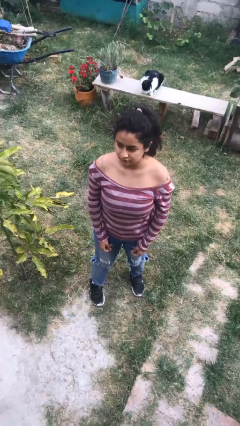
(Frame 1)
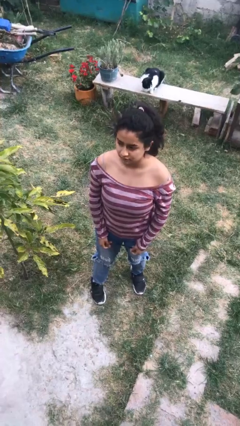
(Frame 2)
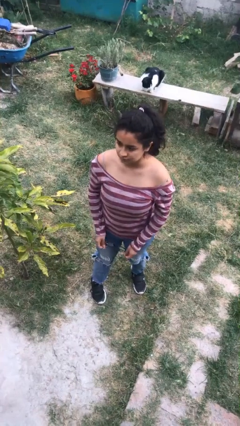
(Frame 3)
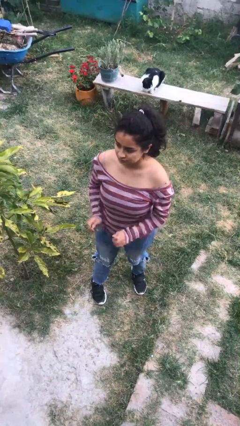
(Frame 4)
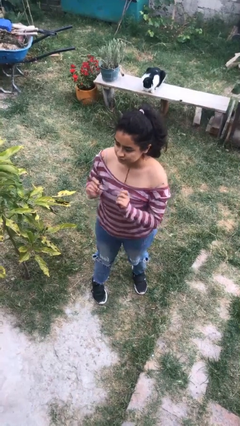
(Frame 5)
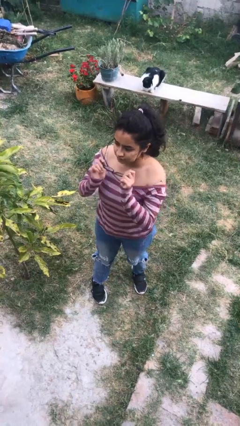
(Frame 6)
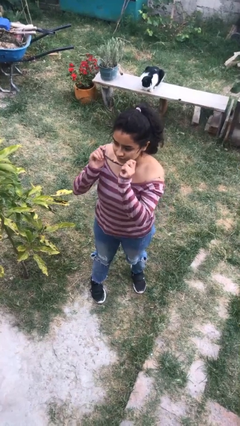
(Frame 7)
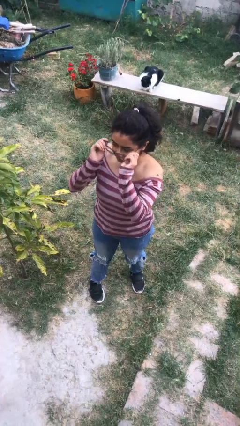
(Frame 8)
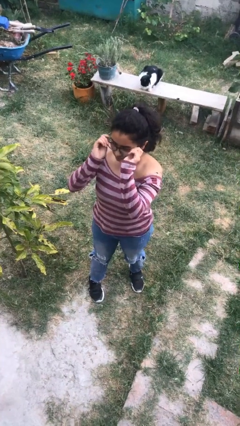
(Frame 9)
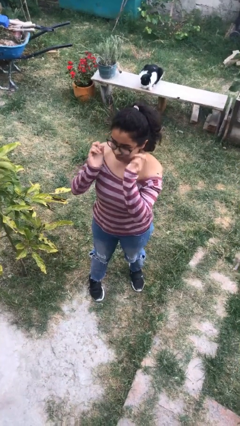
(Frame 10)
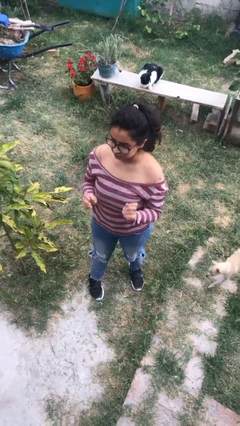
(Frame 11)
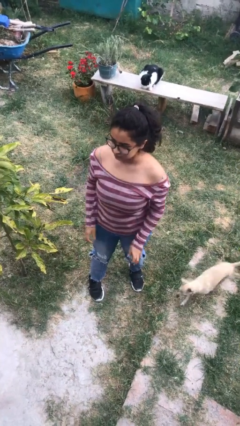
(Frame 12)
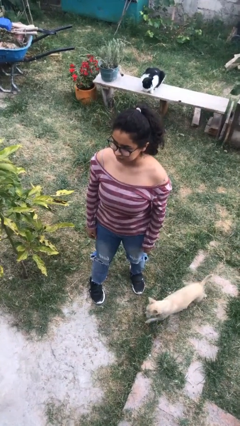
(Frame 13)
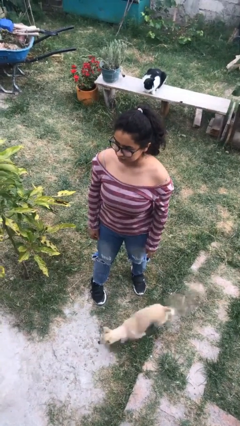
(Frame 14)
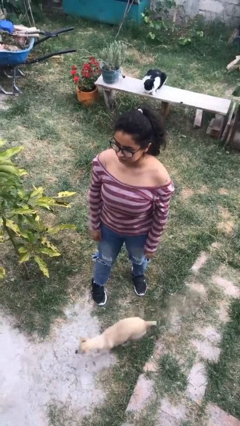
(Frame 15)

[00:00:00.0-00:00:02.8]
person puts on glasses

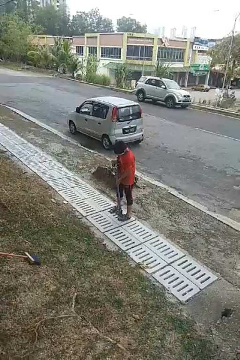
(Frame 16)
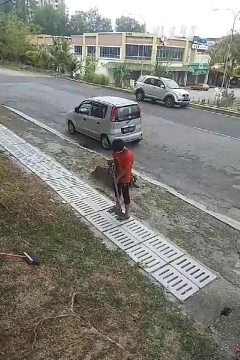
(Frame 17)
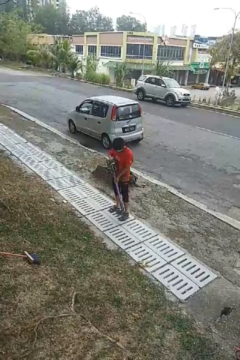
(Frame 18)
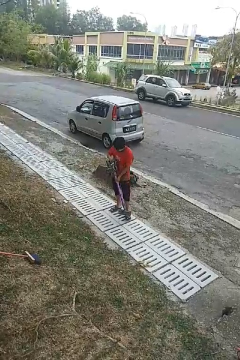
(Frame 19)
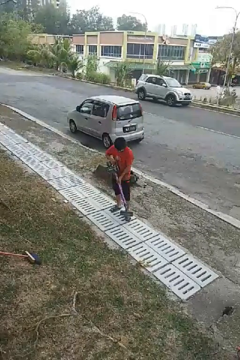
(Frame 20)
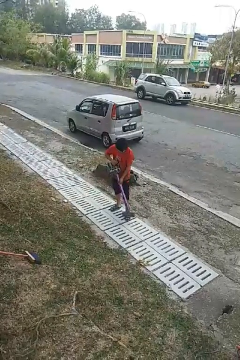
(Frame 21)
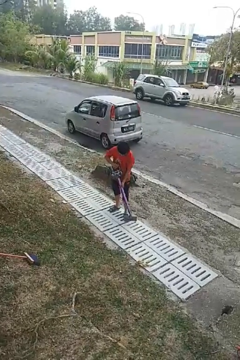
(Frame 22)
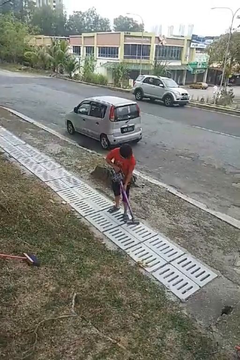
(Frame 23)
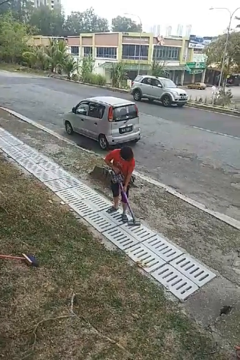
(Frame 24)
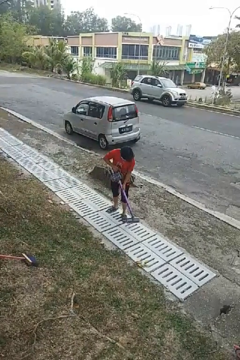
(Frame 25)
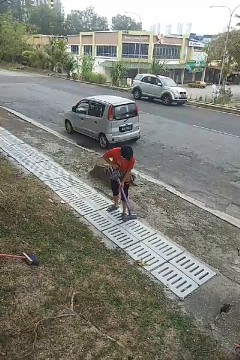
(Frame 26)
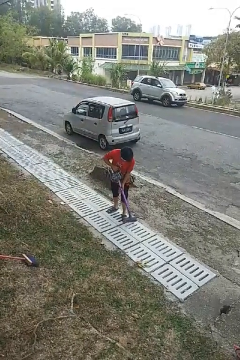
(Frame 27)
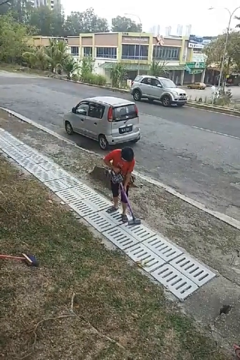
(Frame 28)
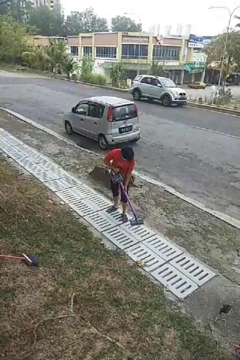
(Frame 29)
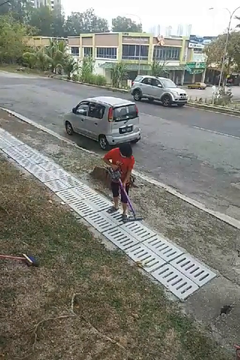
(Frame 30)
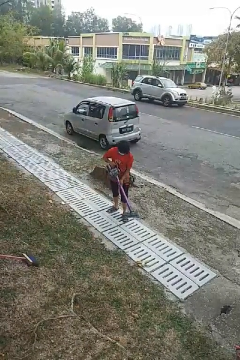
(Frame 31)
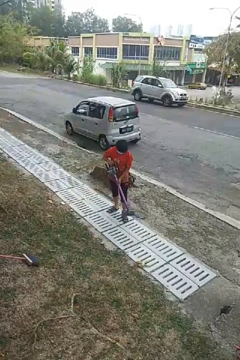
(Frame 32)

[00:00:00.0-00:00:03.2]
person vacuums carpet

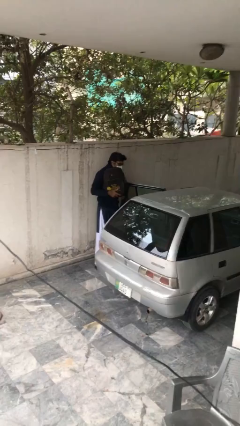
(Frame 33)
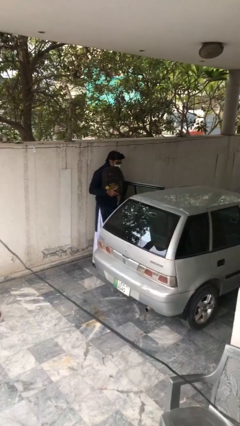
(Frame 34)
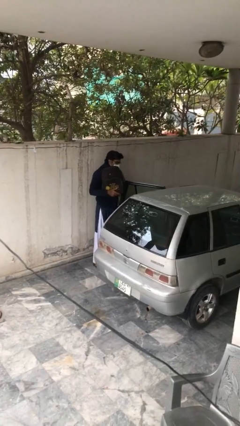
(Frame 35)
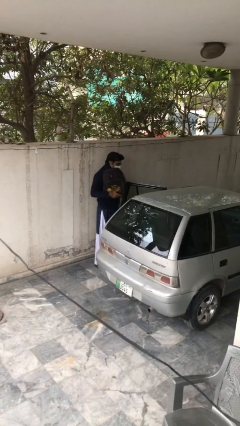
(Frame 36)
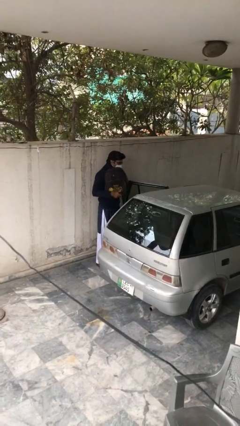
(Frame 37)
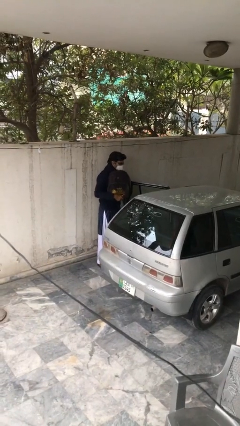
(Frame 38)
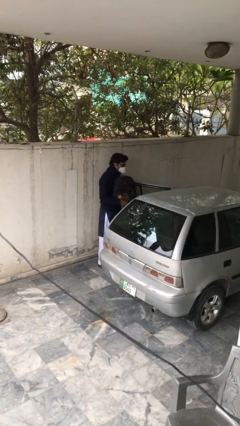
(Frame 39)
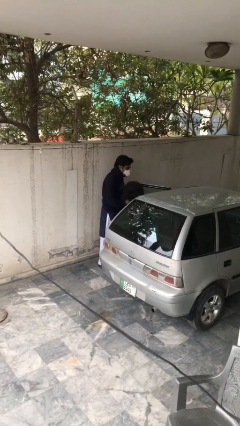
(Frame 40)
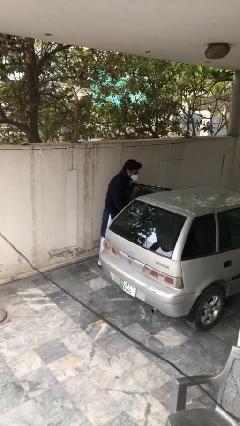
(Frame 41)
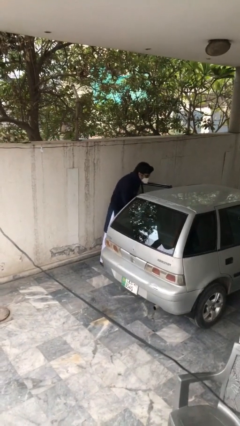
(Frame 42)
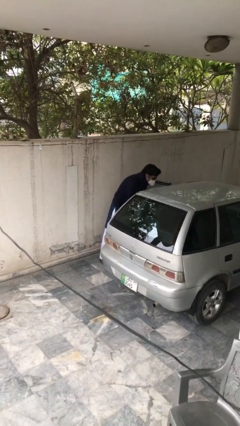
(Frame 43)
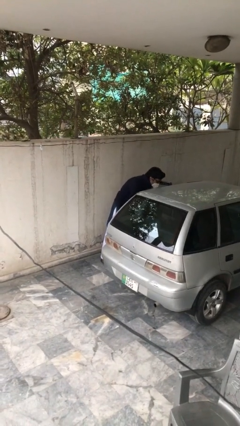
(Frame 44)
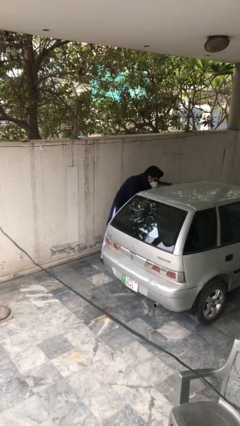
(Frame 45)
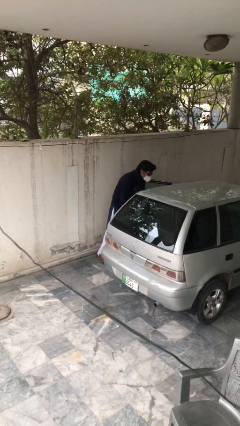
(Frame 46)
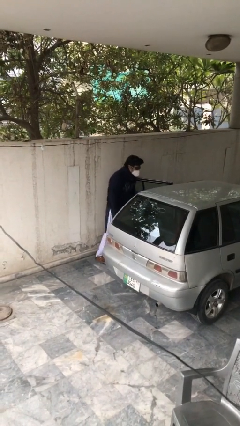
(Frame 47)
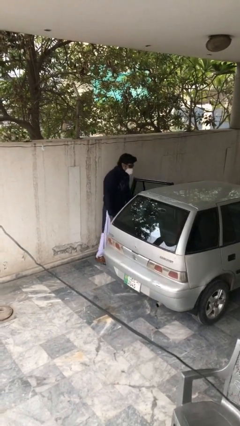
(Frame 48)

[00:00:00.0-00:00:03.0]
person loads car

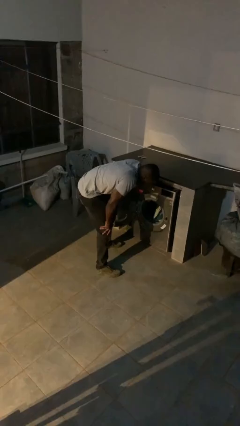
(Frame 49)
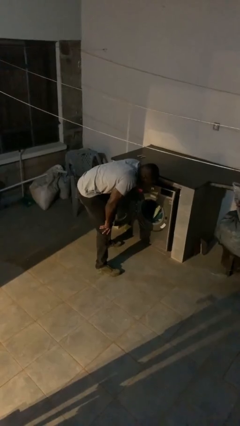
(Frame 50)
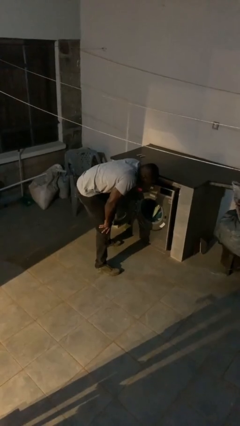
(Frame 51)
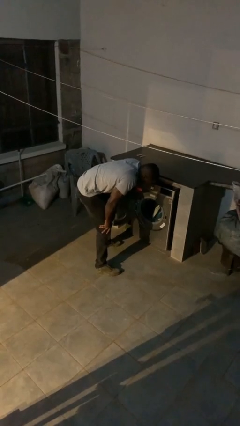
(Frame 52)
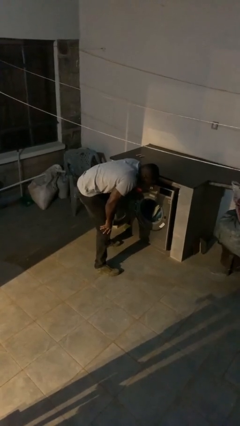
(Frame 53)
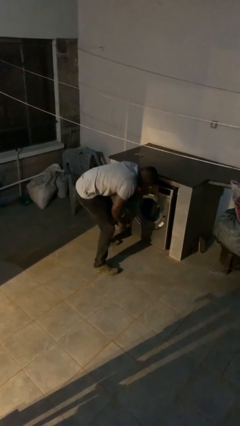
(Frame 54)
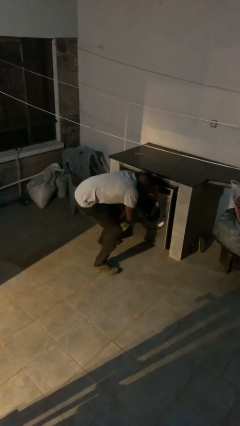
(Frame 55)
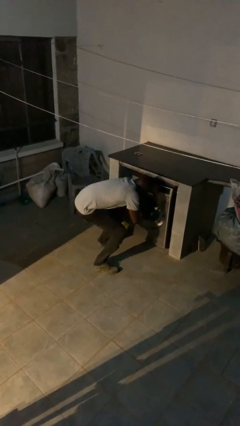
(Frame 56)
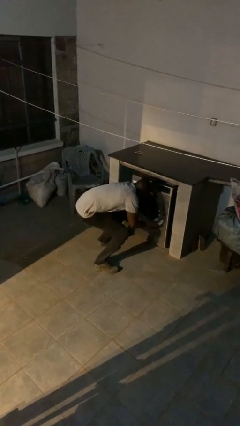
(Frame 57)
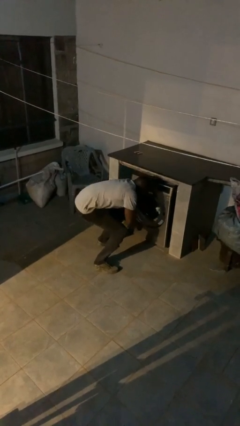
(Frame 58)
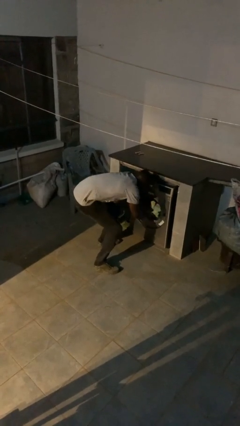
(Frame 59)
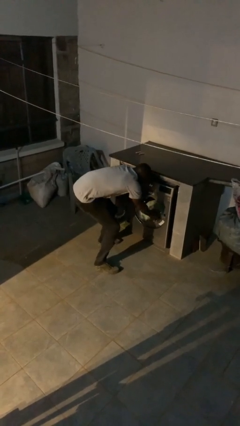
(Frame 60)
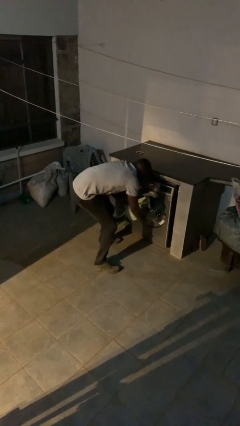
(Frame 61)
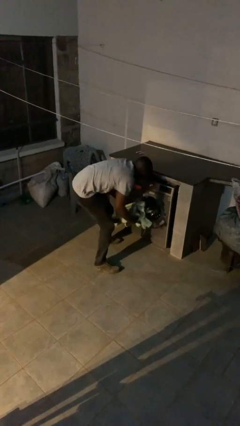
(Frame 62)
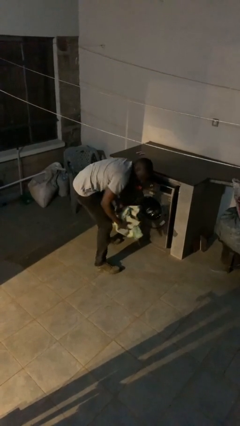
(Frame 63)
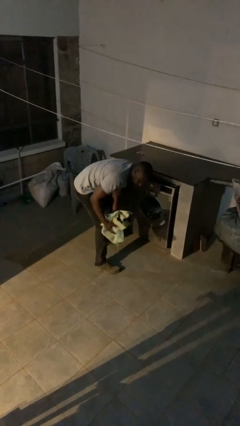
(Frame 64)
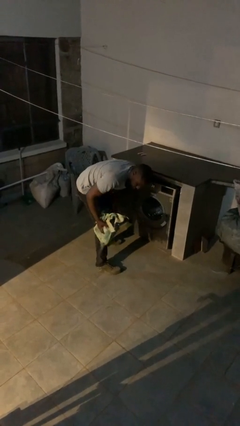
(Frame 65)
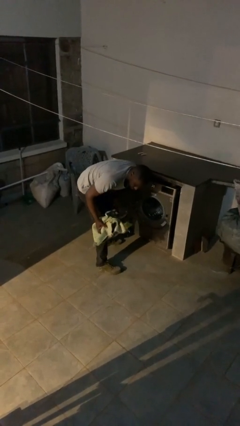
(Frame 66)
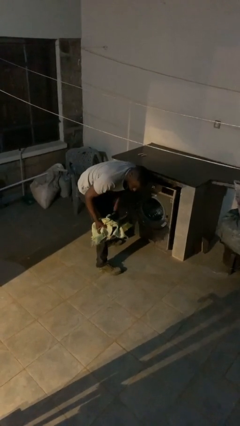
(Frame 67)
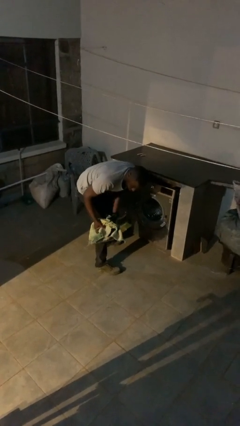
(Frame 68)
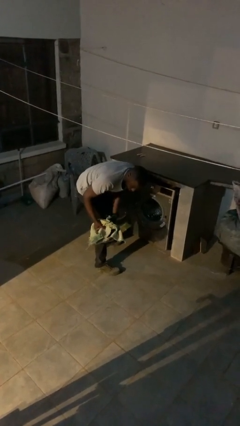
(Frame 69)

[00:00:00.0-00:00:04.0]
person unloads clotheswasher

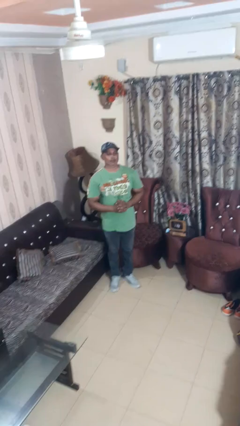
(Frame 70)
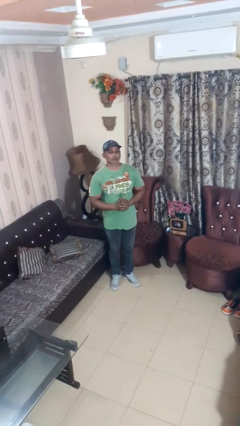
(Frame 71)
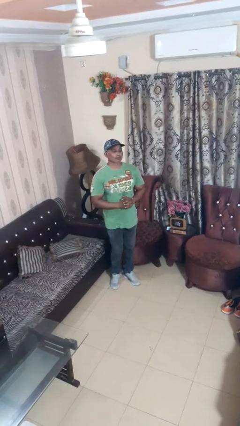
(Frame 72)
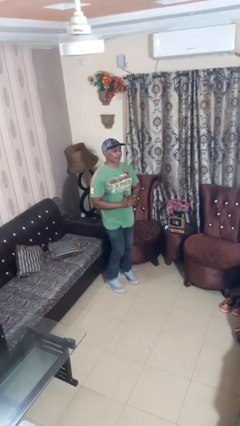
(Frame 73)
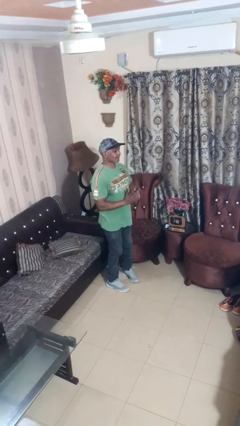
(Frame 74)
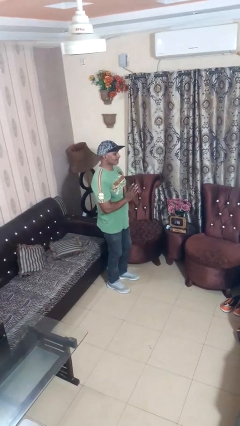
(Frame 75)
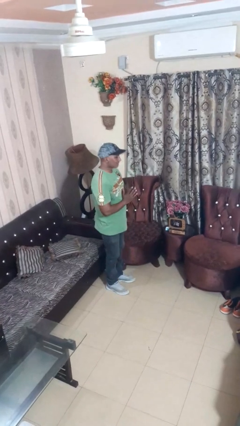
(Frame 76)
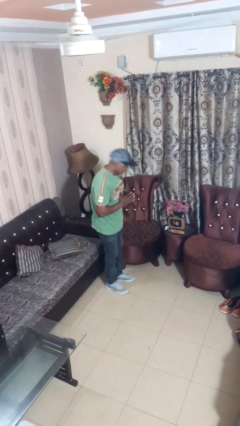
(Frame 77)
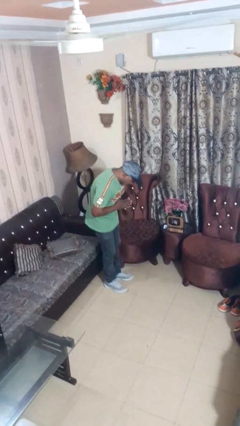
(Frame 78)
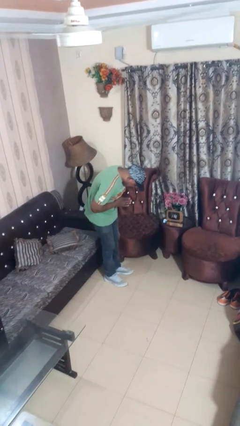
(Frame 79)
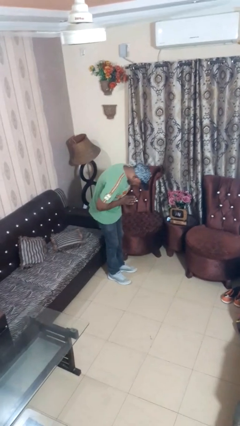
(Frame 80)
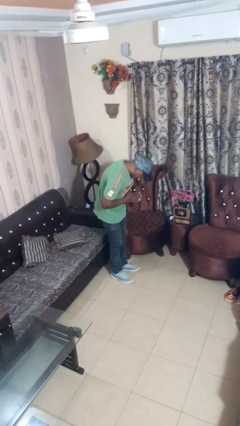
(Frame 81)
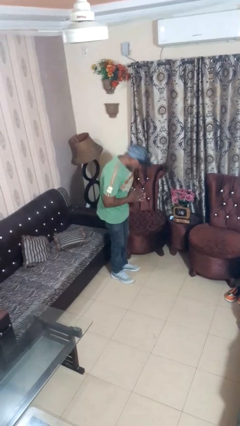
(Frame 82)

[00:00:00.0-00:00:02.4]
person bows

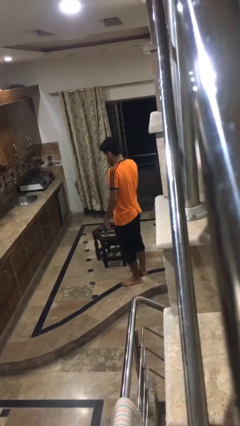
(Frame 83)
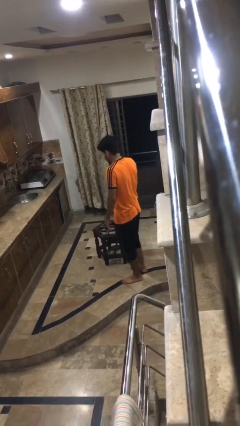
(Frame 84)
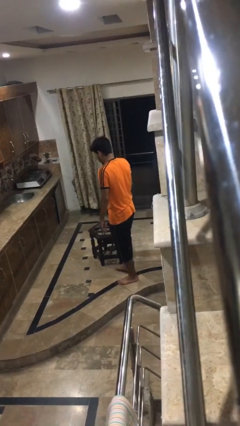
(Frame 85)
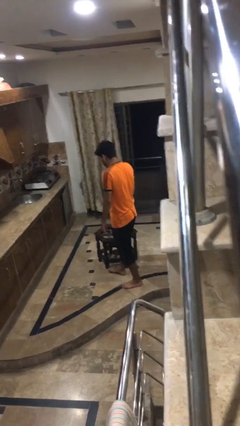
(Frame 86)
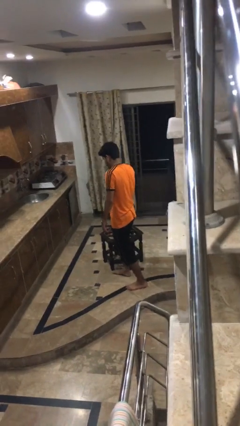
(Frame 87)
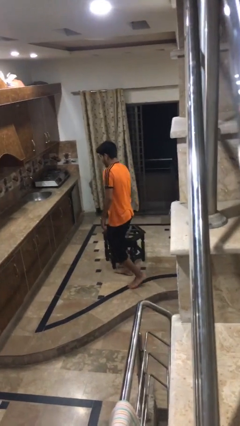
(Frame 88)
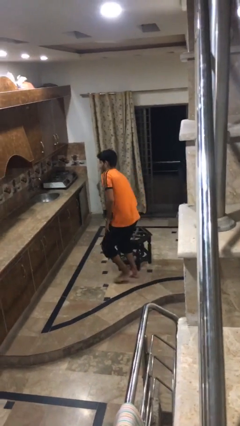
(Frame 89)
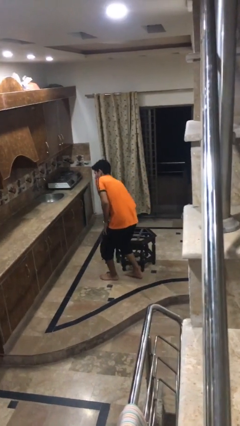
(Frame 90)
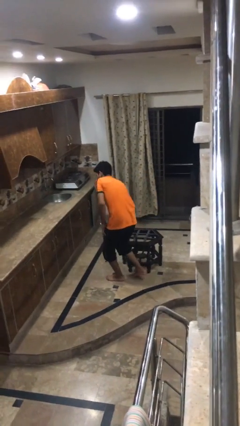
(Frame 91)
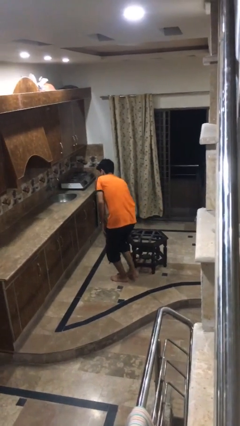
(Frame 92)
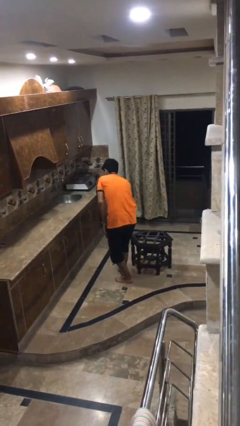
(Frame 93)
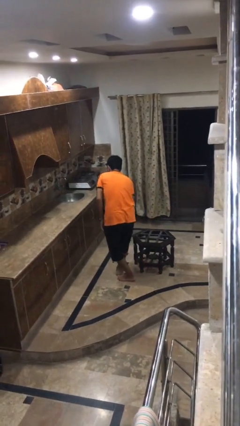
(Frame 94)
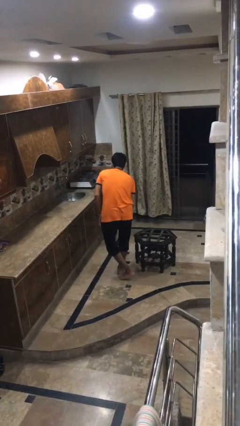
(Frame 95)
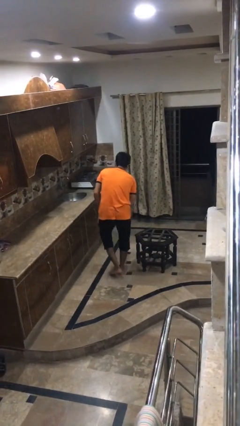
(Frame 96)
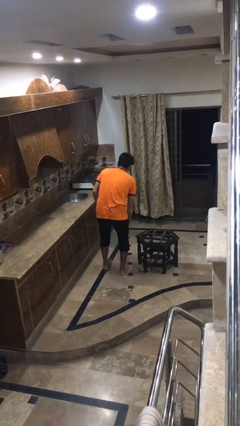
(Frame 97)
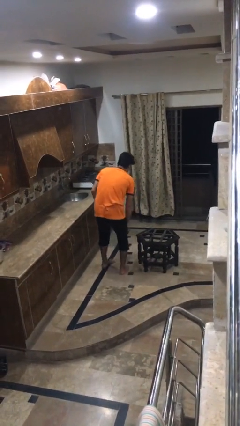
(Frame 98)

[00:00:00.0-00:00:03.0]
person bumps into table
